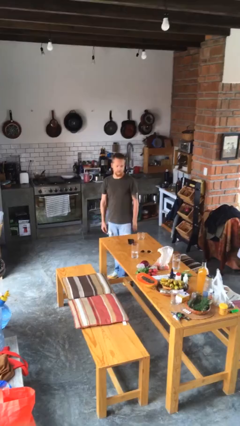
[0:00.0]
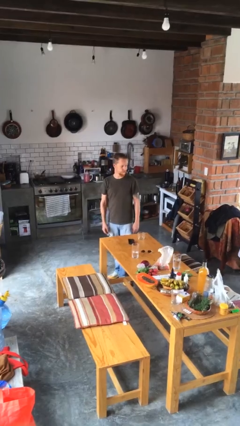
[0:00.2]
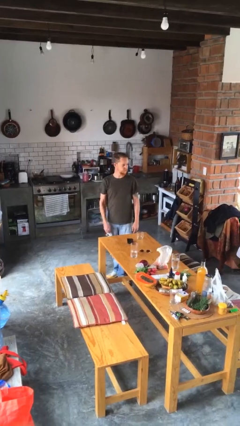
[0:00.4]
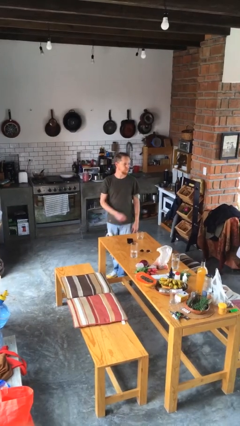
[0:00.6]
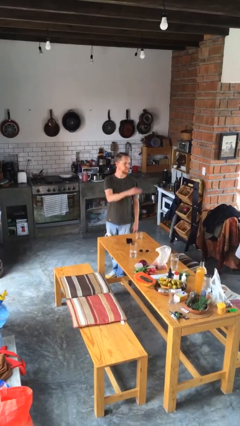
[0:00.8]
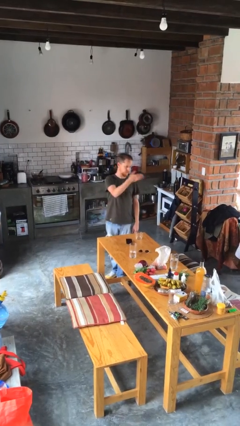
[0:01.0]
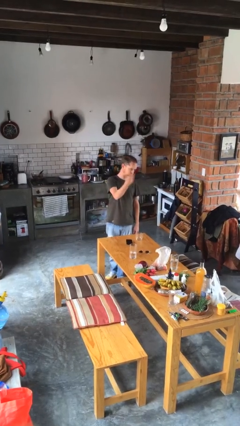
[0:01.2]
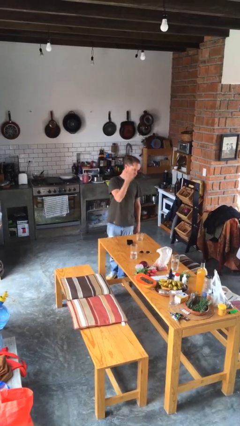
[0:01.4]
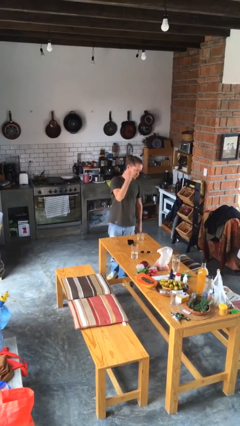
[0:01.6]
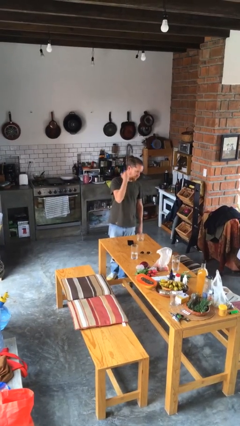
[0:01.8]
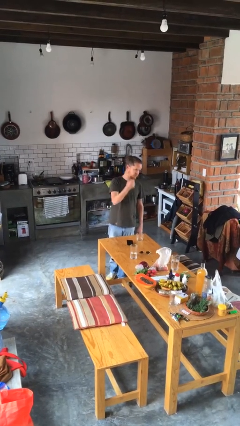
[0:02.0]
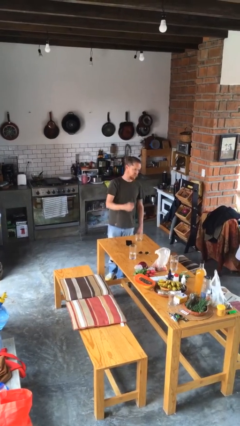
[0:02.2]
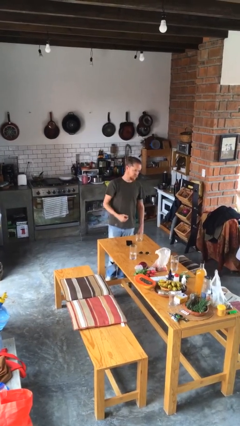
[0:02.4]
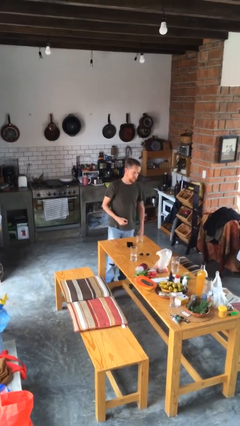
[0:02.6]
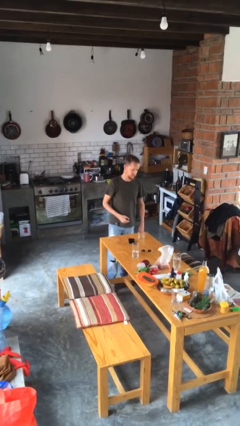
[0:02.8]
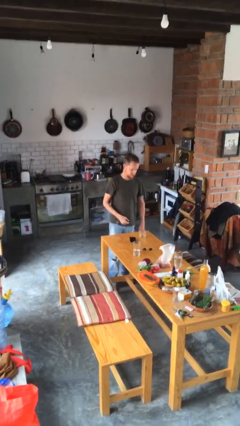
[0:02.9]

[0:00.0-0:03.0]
person gestures come here

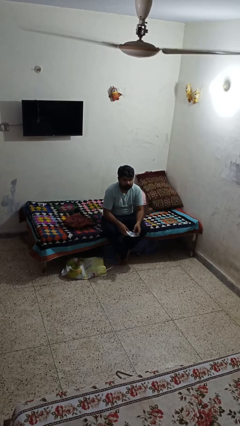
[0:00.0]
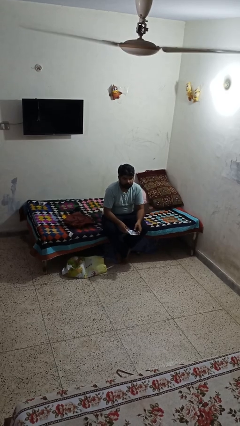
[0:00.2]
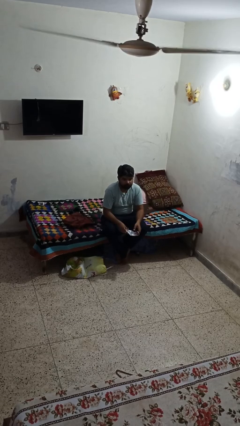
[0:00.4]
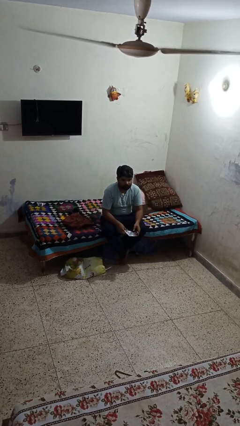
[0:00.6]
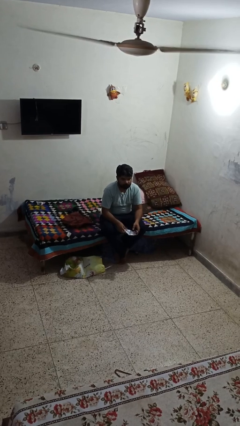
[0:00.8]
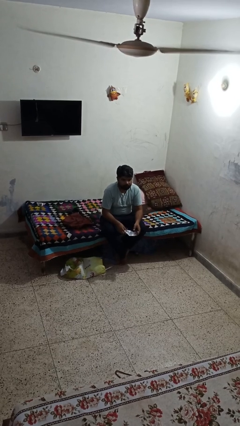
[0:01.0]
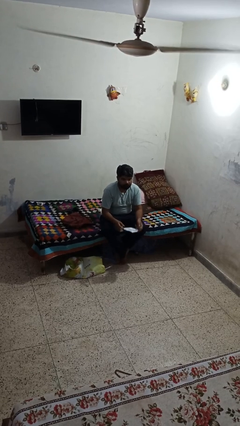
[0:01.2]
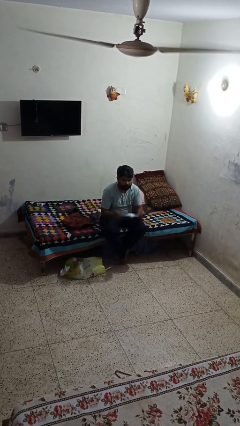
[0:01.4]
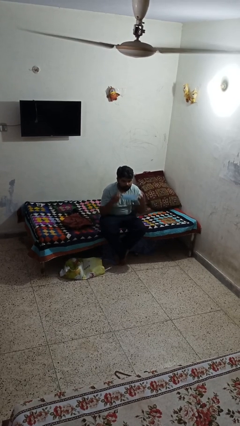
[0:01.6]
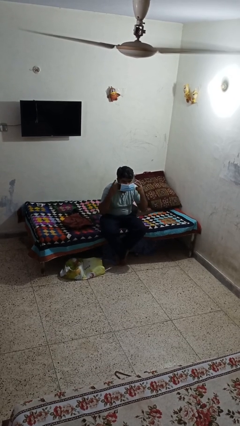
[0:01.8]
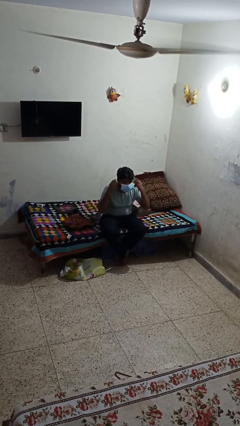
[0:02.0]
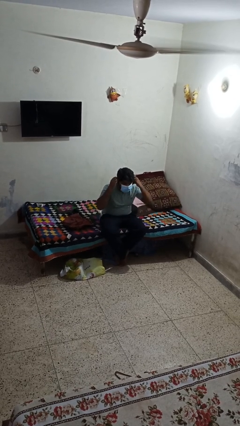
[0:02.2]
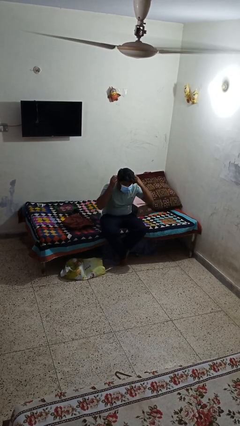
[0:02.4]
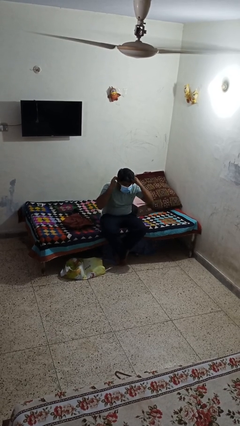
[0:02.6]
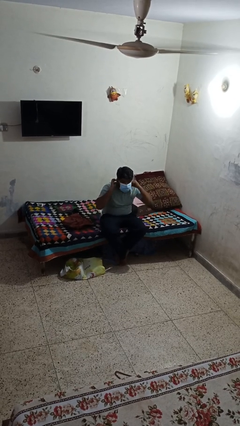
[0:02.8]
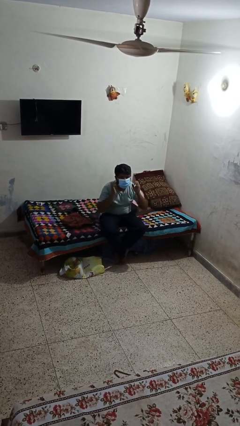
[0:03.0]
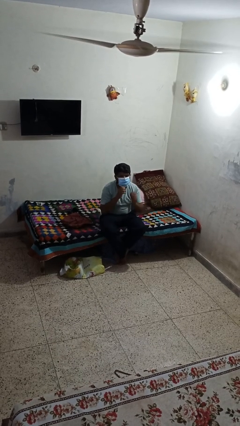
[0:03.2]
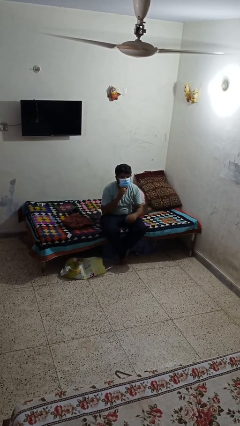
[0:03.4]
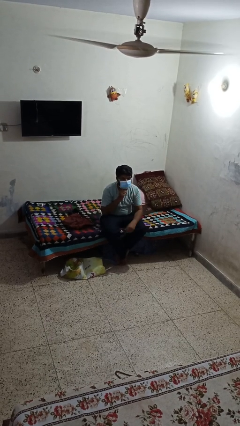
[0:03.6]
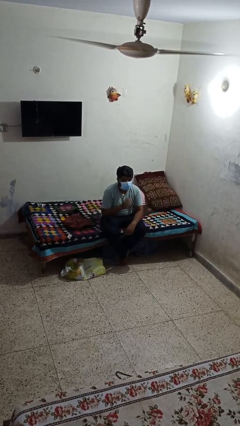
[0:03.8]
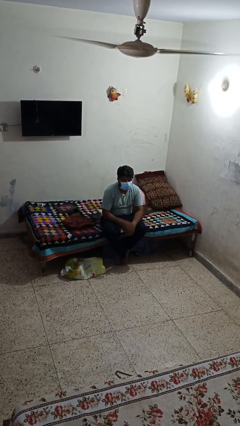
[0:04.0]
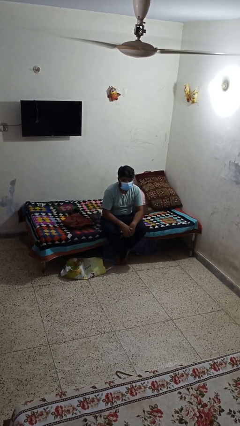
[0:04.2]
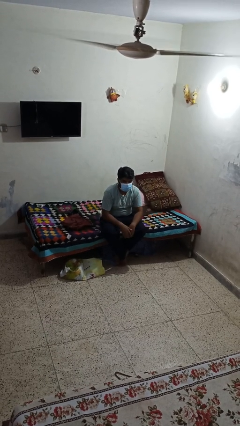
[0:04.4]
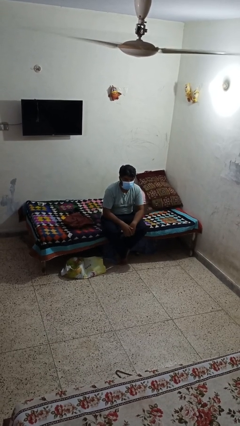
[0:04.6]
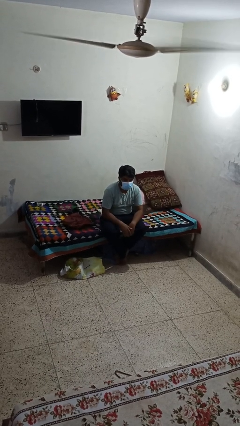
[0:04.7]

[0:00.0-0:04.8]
person puts on facemask

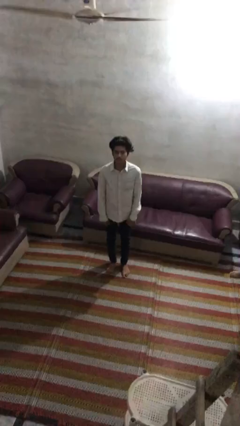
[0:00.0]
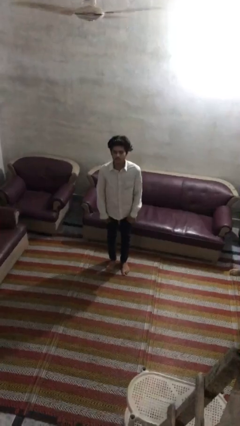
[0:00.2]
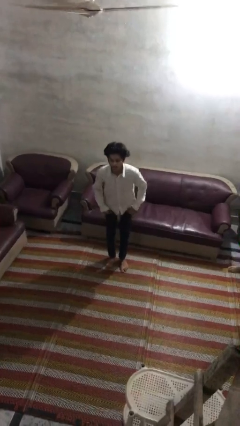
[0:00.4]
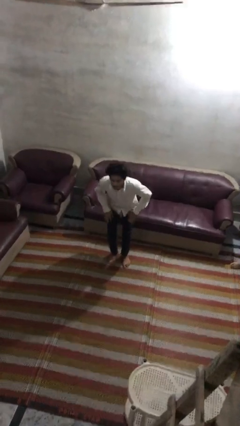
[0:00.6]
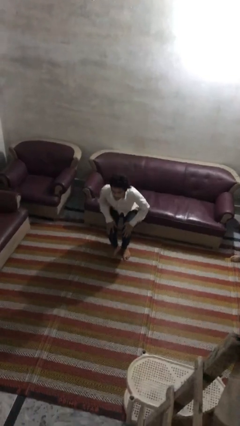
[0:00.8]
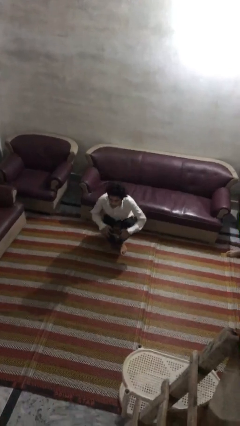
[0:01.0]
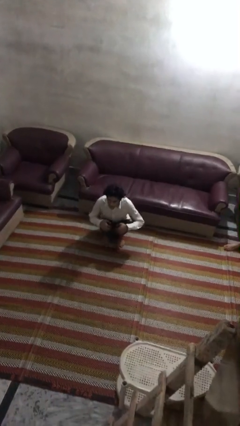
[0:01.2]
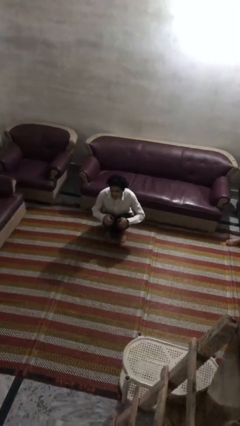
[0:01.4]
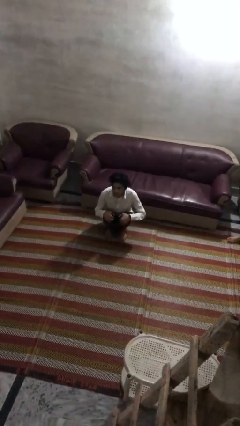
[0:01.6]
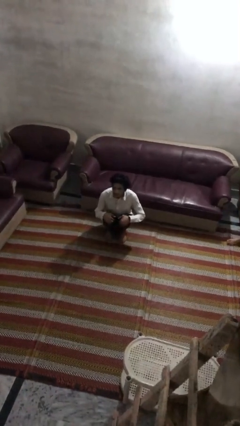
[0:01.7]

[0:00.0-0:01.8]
person squats

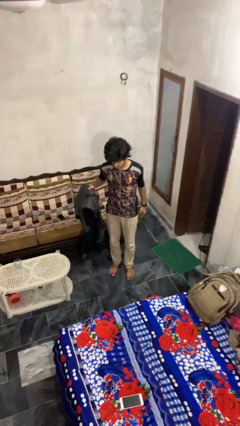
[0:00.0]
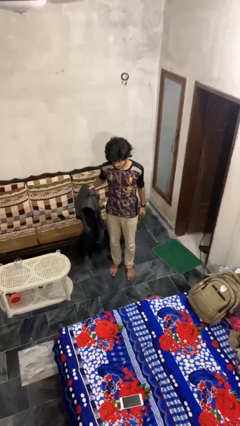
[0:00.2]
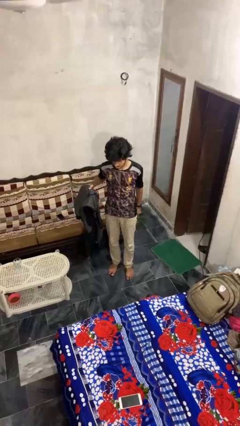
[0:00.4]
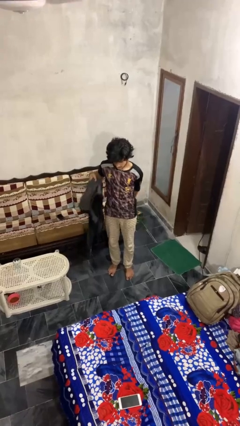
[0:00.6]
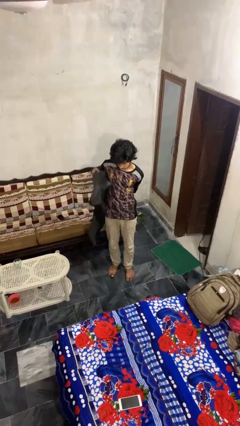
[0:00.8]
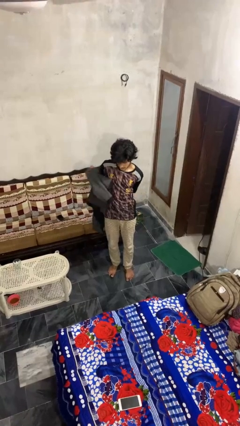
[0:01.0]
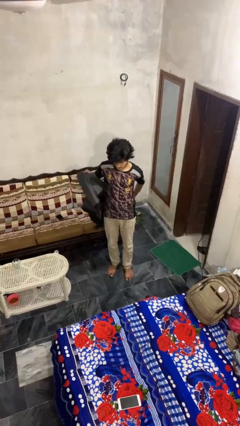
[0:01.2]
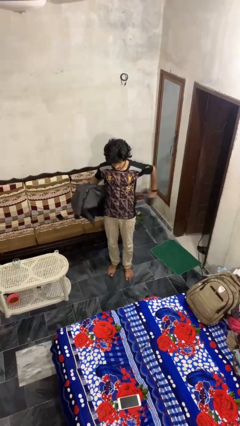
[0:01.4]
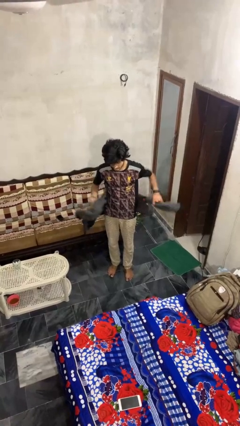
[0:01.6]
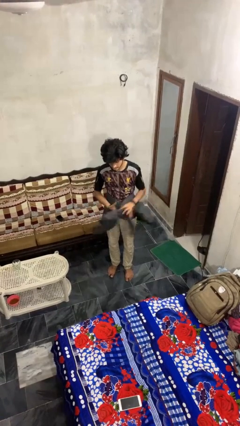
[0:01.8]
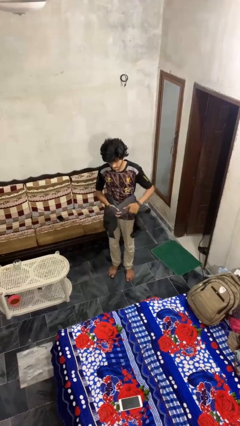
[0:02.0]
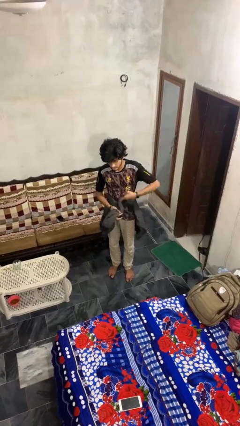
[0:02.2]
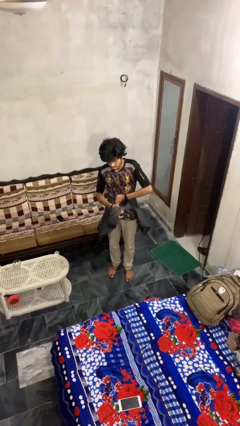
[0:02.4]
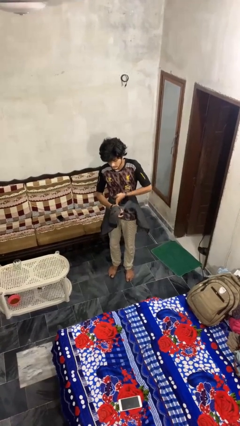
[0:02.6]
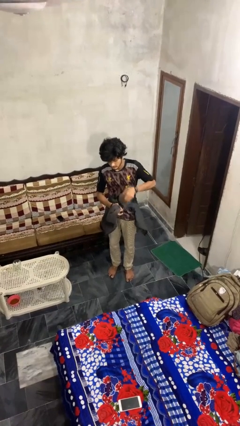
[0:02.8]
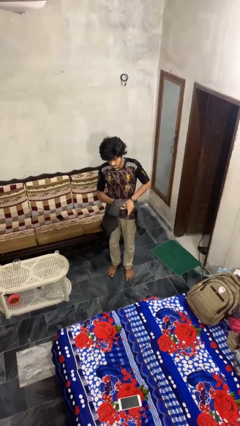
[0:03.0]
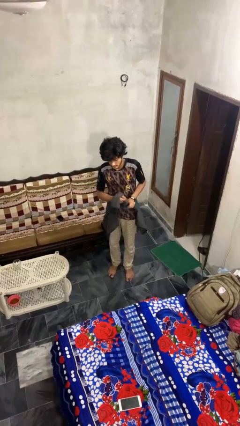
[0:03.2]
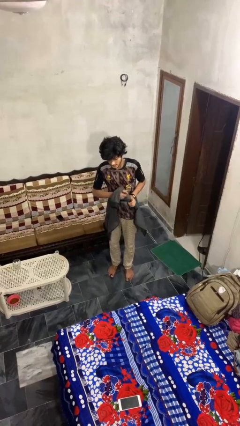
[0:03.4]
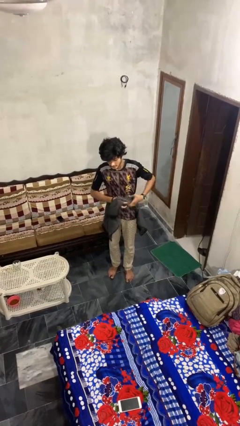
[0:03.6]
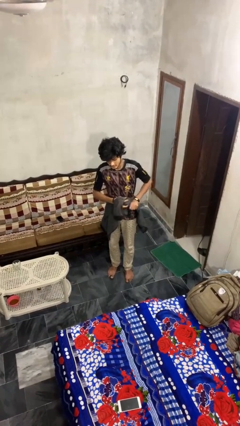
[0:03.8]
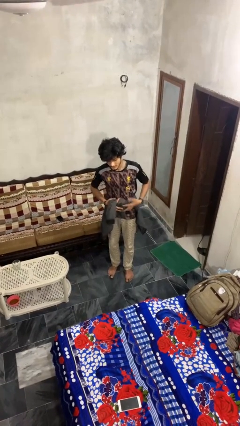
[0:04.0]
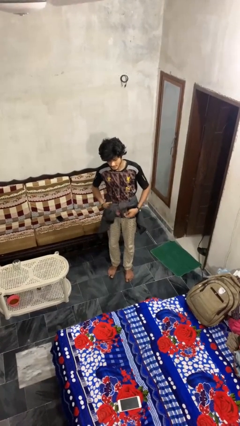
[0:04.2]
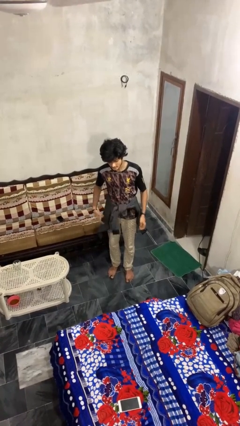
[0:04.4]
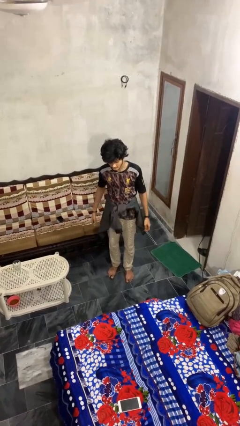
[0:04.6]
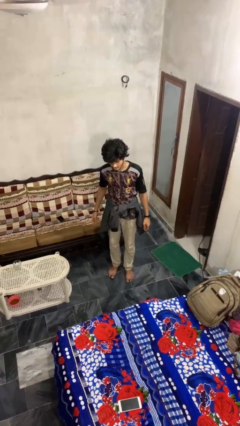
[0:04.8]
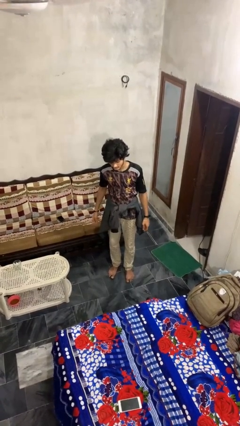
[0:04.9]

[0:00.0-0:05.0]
person ties jacket around waist

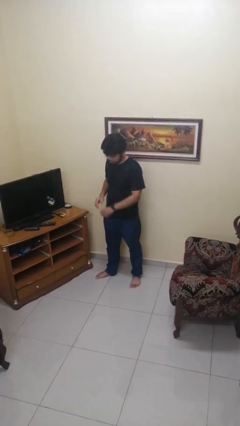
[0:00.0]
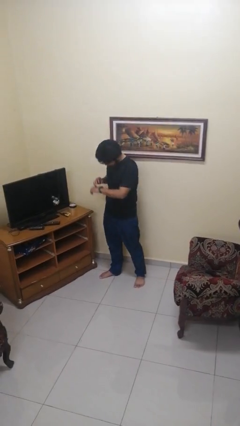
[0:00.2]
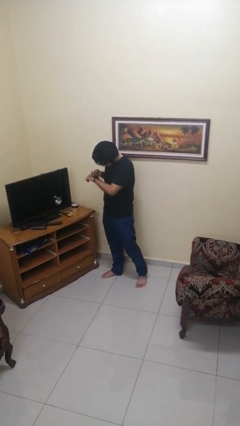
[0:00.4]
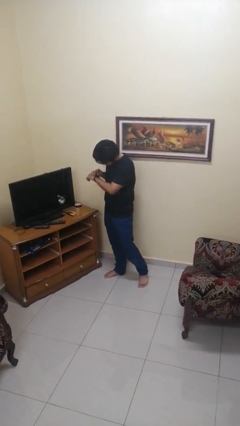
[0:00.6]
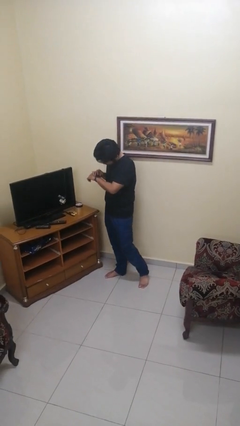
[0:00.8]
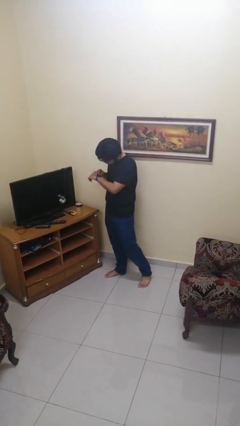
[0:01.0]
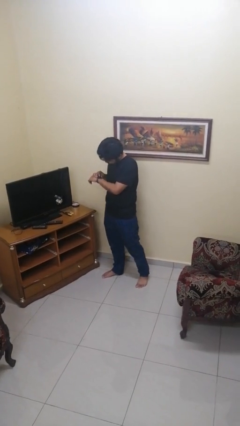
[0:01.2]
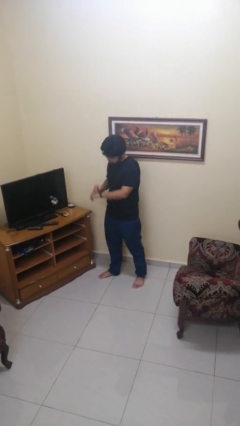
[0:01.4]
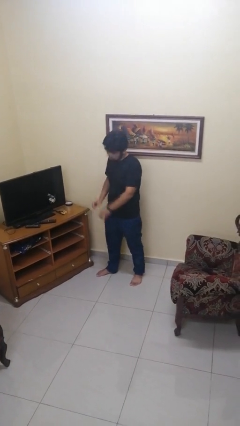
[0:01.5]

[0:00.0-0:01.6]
person looks at wristwatch

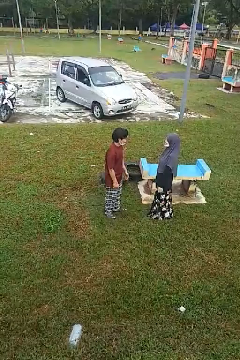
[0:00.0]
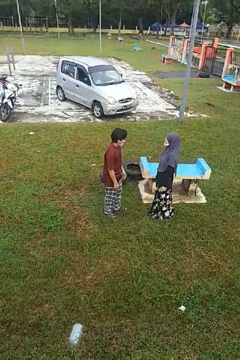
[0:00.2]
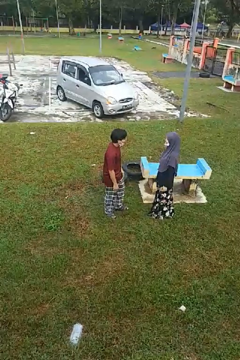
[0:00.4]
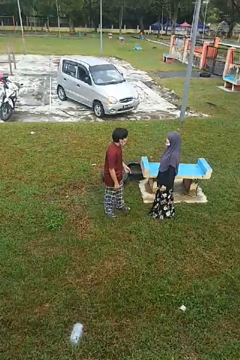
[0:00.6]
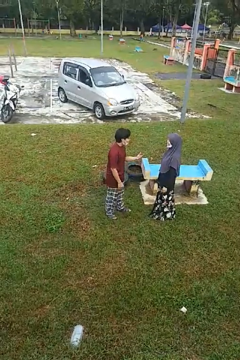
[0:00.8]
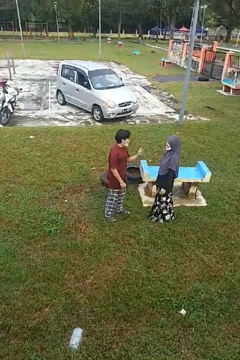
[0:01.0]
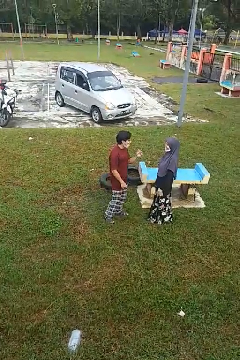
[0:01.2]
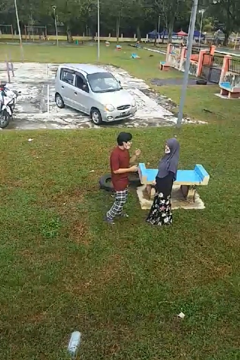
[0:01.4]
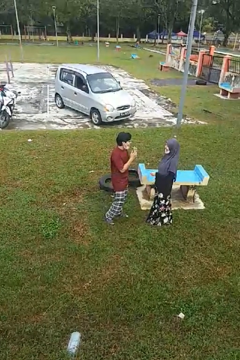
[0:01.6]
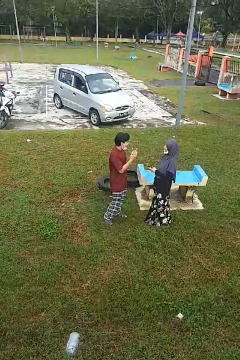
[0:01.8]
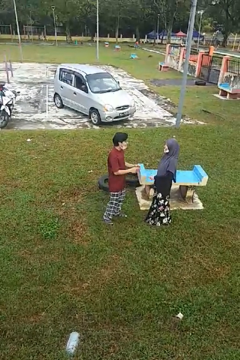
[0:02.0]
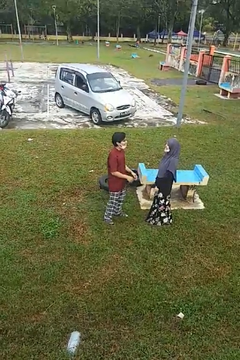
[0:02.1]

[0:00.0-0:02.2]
person laughs with person
